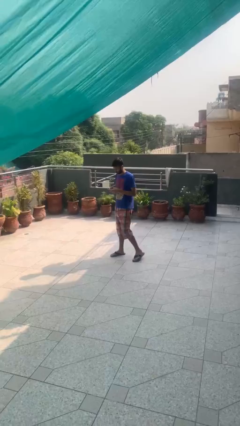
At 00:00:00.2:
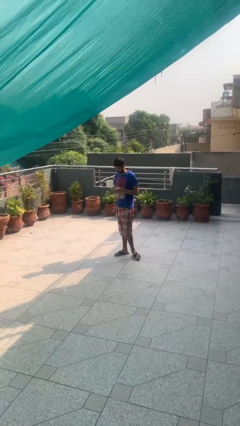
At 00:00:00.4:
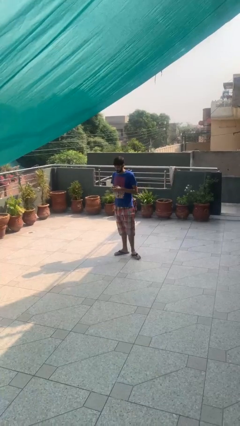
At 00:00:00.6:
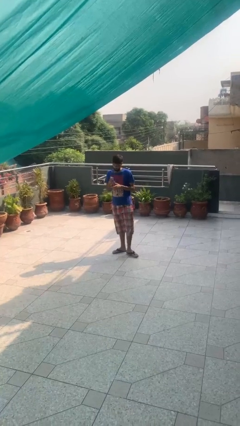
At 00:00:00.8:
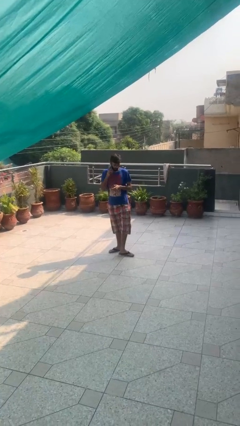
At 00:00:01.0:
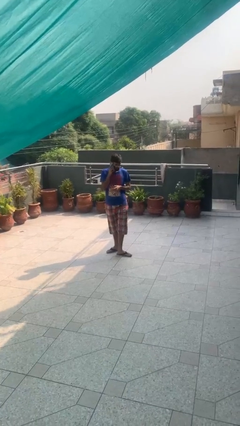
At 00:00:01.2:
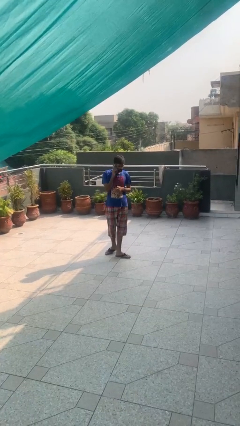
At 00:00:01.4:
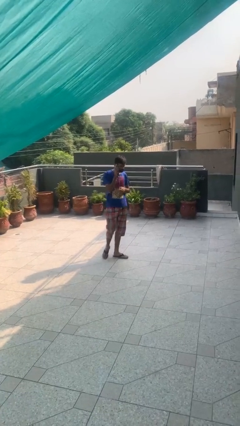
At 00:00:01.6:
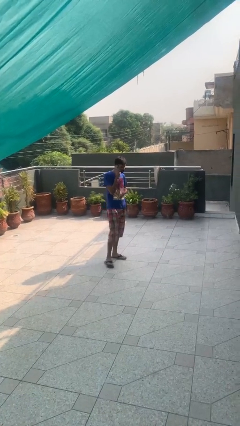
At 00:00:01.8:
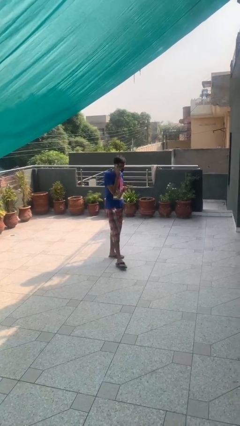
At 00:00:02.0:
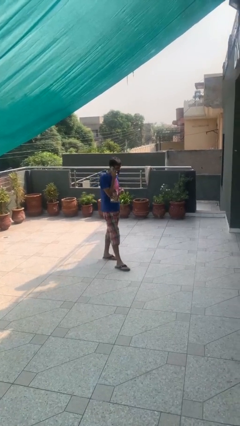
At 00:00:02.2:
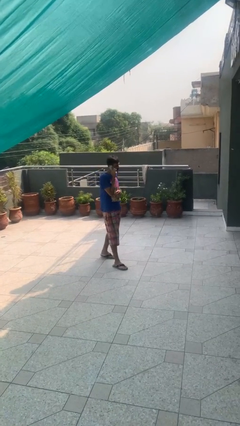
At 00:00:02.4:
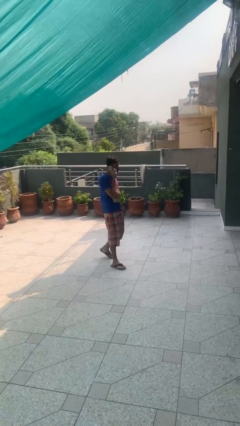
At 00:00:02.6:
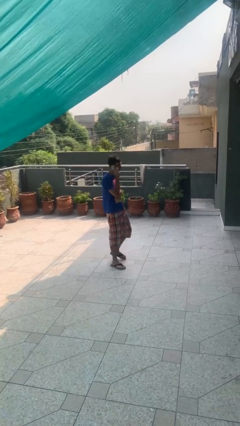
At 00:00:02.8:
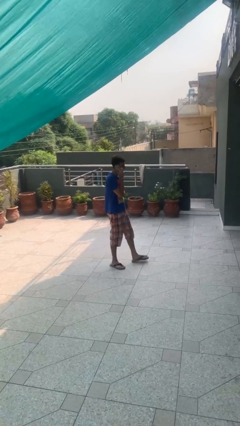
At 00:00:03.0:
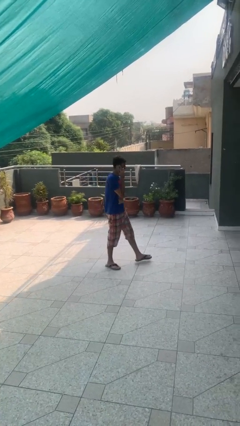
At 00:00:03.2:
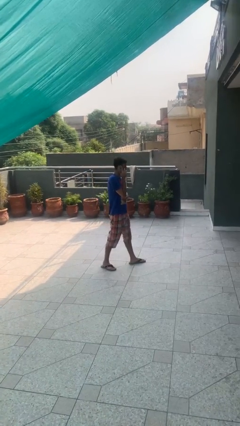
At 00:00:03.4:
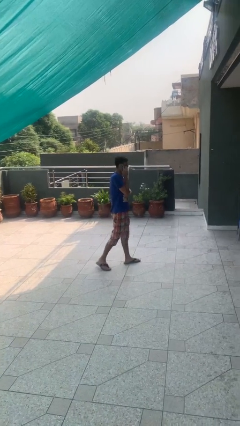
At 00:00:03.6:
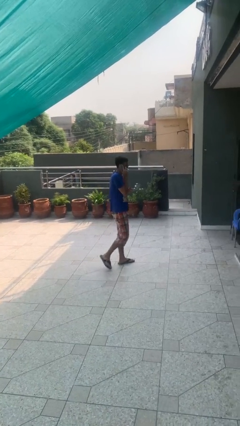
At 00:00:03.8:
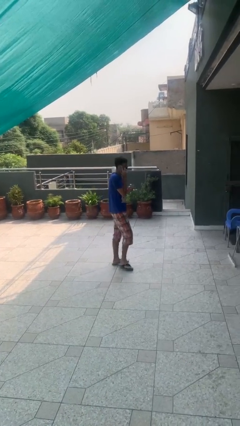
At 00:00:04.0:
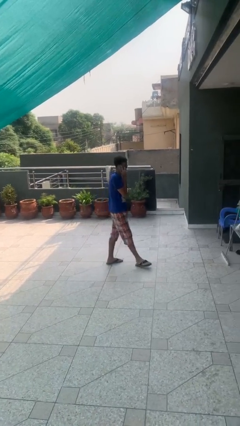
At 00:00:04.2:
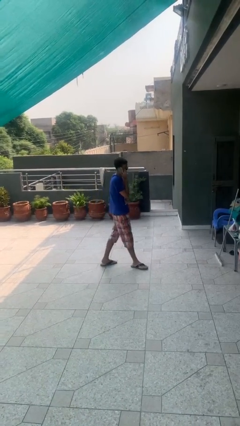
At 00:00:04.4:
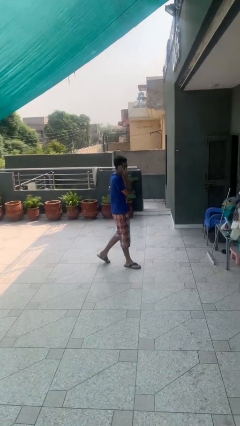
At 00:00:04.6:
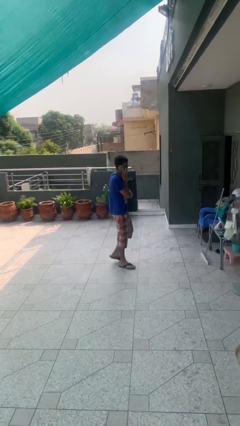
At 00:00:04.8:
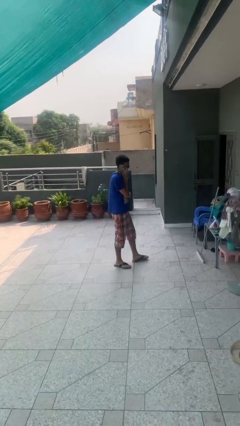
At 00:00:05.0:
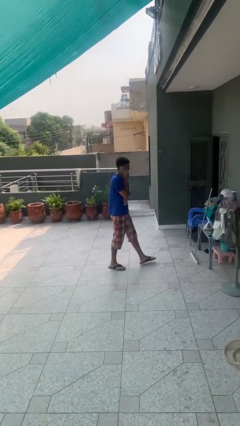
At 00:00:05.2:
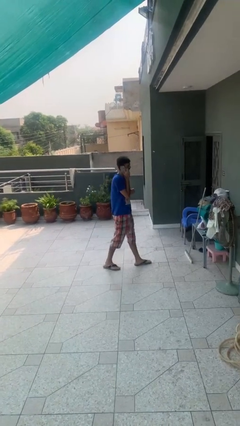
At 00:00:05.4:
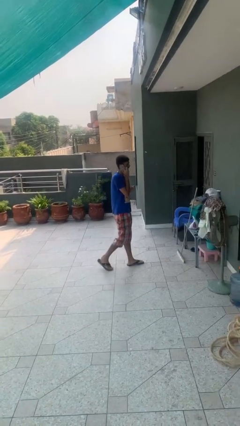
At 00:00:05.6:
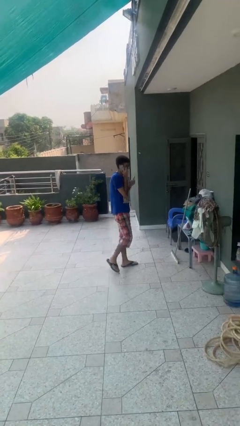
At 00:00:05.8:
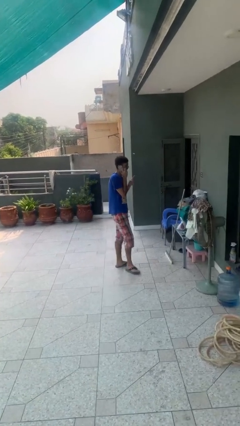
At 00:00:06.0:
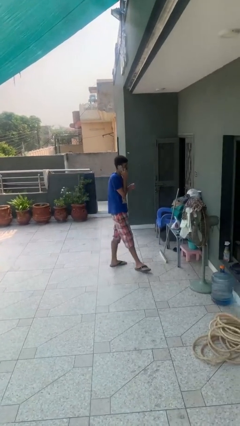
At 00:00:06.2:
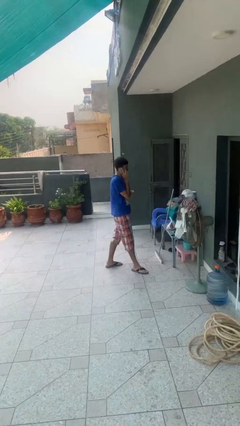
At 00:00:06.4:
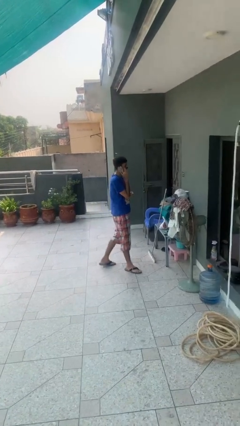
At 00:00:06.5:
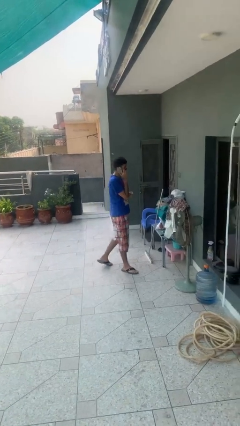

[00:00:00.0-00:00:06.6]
person talks on phone

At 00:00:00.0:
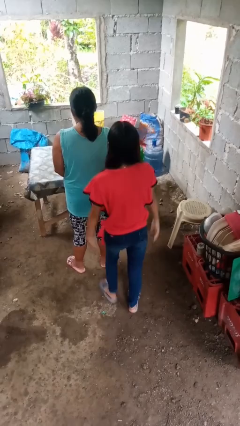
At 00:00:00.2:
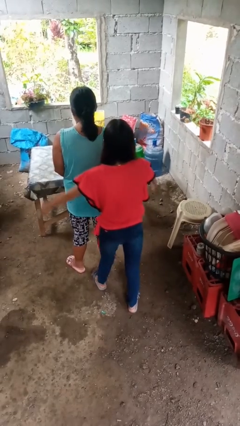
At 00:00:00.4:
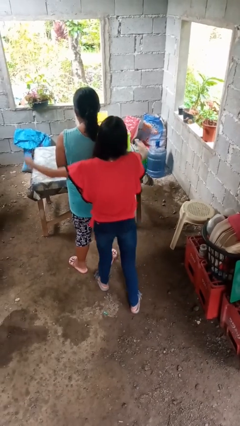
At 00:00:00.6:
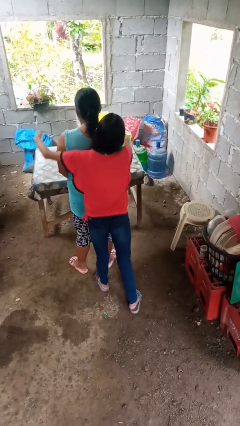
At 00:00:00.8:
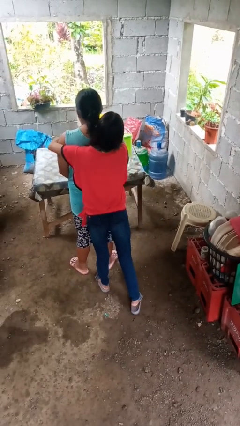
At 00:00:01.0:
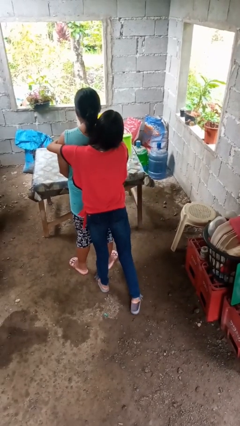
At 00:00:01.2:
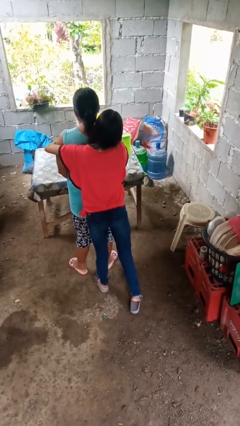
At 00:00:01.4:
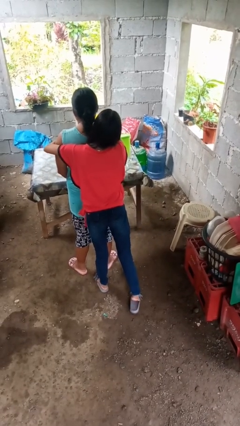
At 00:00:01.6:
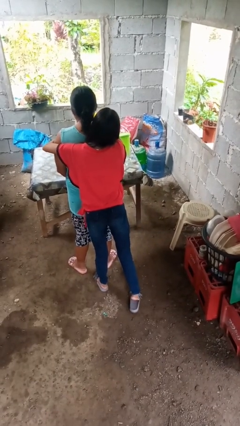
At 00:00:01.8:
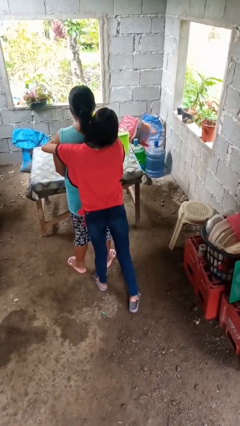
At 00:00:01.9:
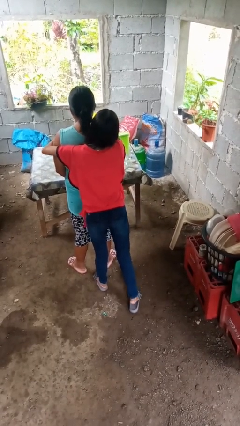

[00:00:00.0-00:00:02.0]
person hugs person from behind

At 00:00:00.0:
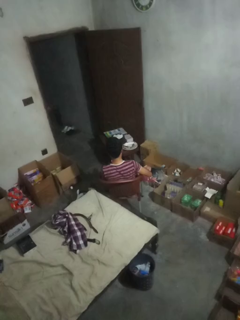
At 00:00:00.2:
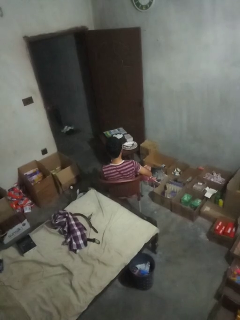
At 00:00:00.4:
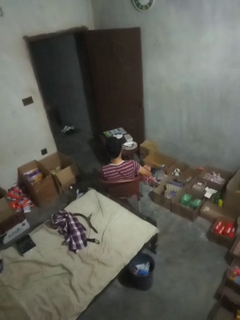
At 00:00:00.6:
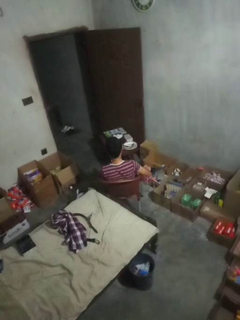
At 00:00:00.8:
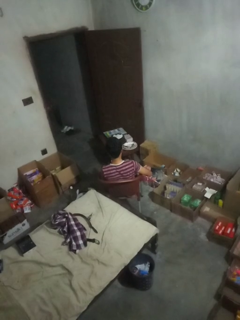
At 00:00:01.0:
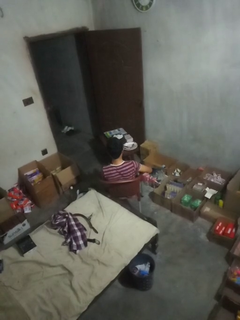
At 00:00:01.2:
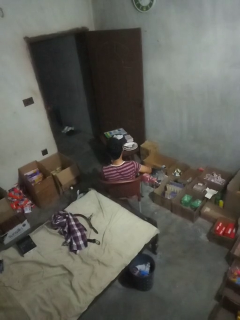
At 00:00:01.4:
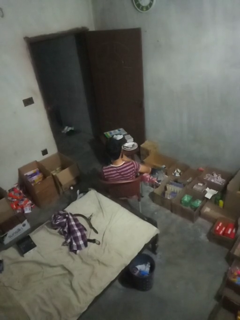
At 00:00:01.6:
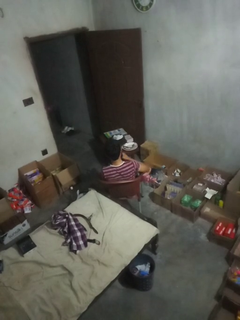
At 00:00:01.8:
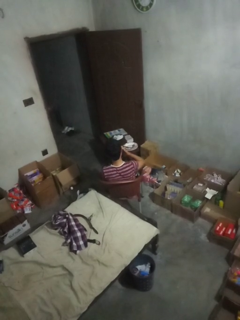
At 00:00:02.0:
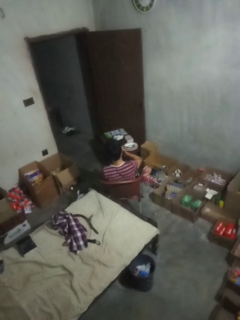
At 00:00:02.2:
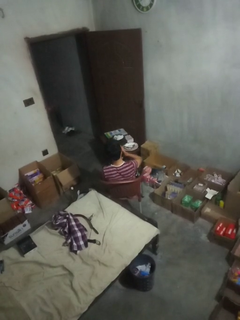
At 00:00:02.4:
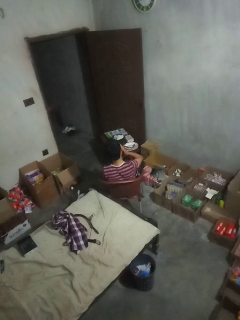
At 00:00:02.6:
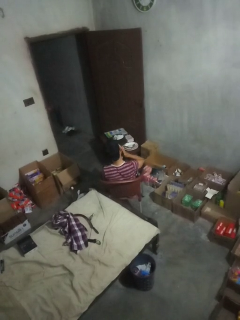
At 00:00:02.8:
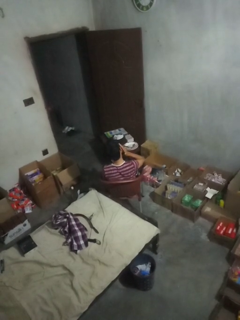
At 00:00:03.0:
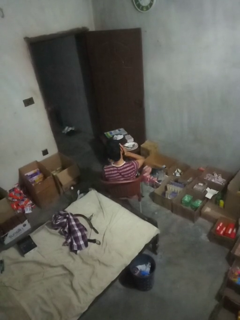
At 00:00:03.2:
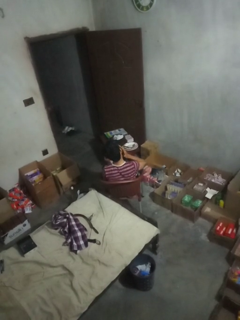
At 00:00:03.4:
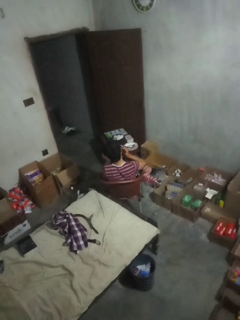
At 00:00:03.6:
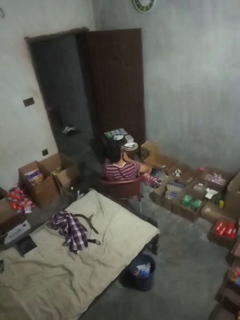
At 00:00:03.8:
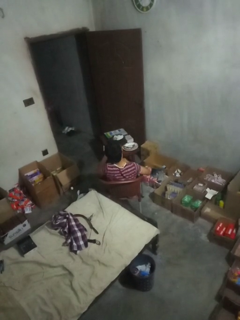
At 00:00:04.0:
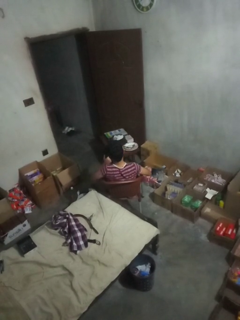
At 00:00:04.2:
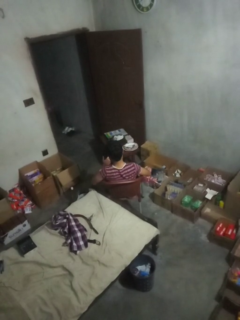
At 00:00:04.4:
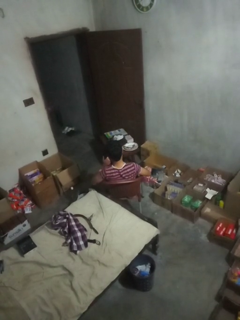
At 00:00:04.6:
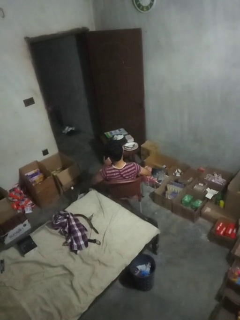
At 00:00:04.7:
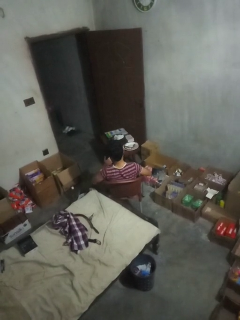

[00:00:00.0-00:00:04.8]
person applies facial moisturizer

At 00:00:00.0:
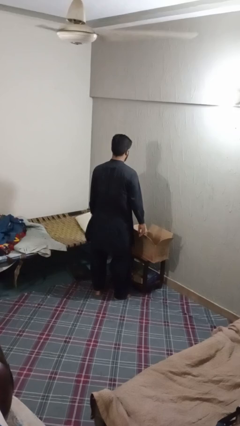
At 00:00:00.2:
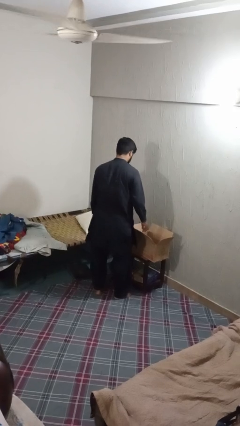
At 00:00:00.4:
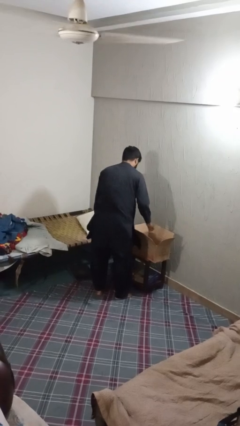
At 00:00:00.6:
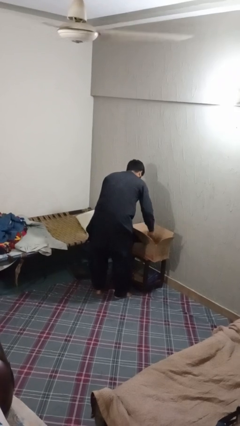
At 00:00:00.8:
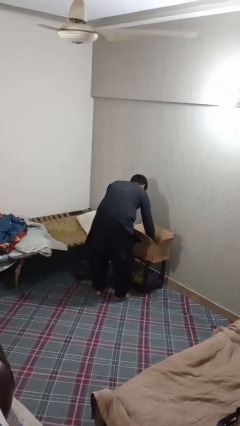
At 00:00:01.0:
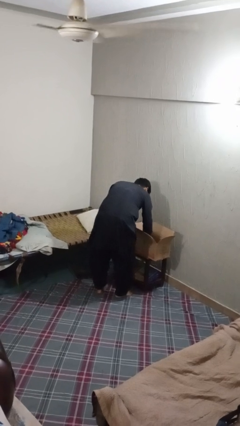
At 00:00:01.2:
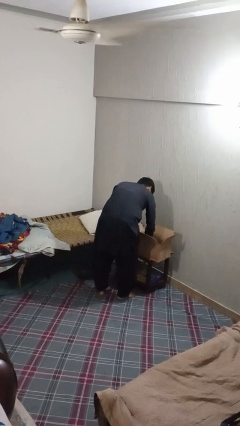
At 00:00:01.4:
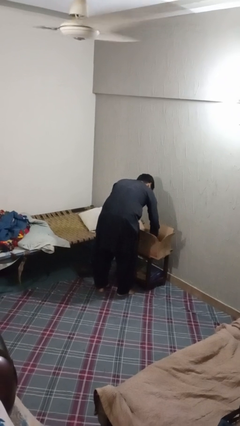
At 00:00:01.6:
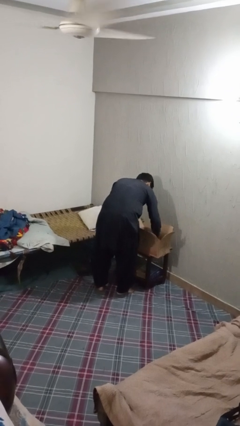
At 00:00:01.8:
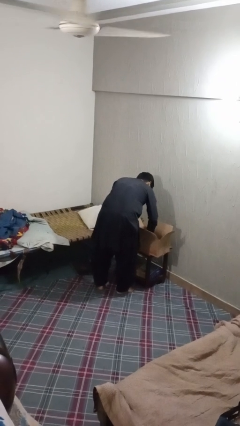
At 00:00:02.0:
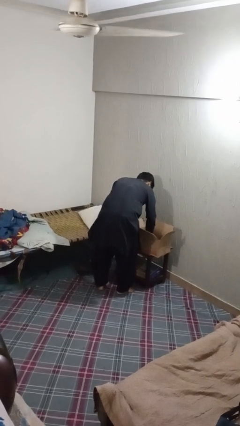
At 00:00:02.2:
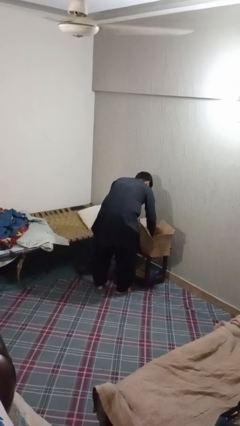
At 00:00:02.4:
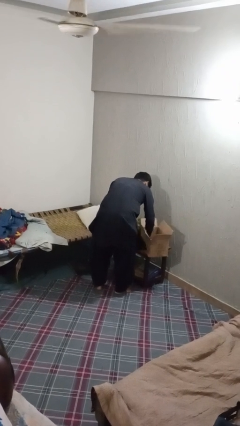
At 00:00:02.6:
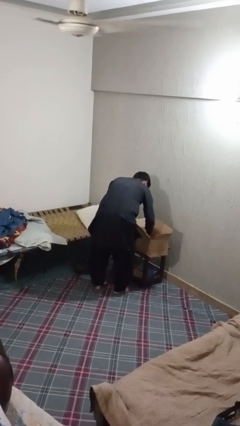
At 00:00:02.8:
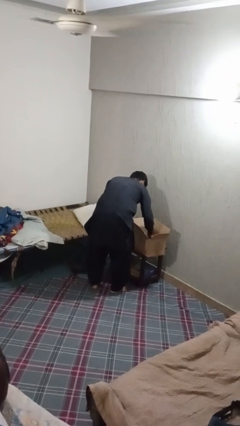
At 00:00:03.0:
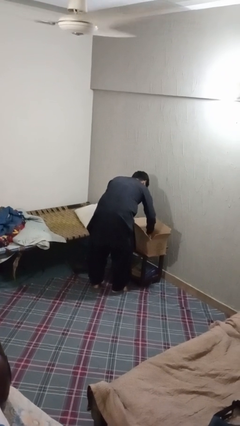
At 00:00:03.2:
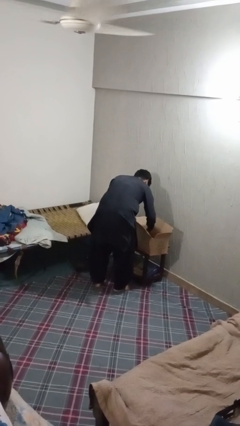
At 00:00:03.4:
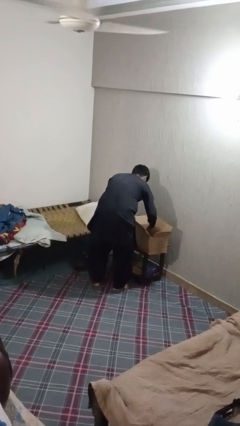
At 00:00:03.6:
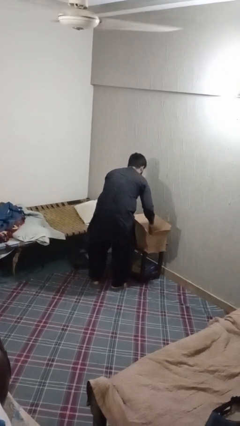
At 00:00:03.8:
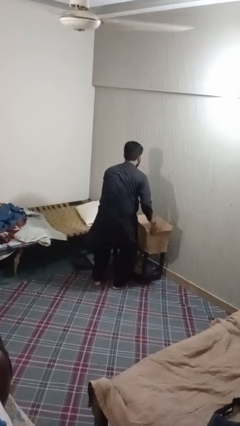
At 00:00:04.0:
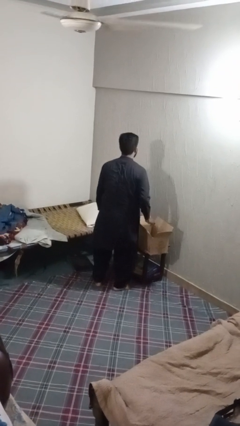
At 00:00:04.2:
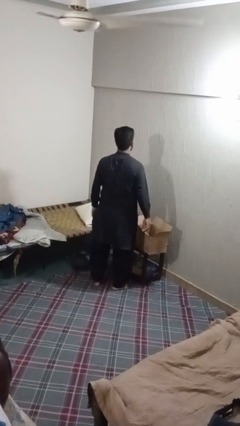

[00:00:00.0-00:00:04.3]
person searches in box

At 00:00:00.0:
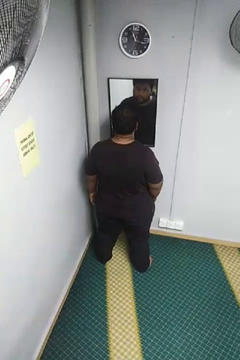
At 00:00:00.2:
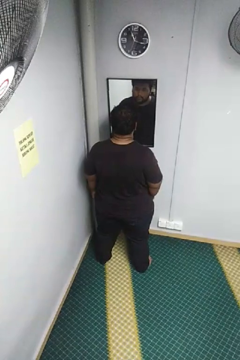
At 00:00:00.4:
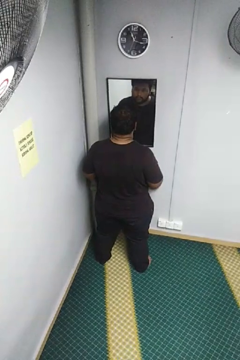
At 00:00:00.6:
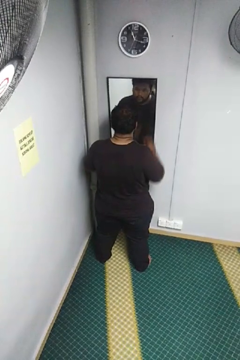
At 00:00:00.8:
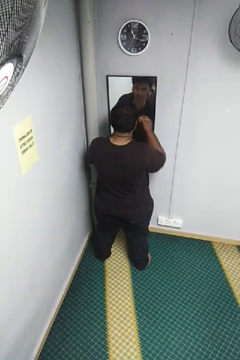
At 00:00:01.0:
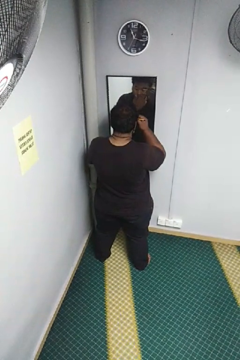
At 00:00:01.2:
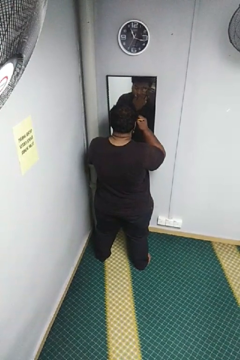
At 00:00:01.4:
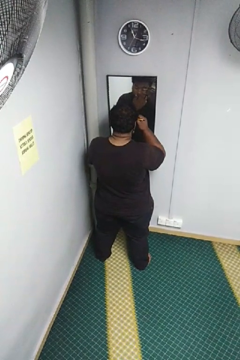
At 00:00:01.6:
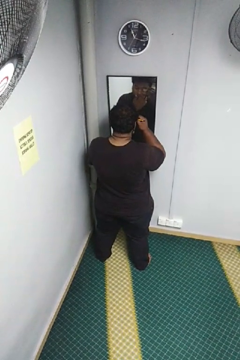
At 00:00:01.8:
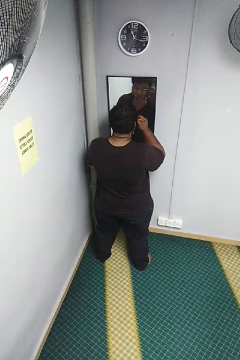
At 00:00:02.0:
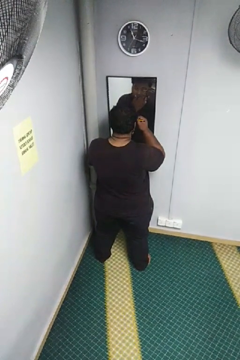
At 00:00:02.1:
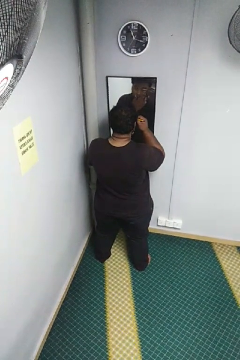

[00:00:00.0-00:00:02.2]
person applies eye makeup
